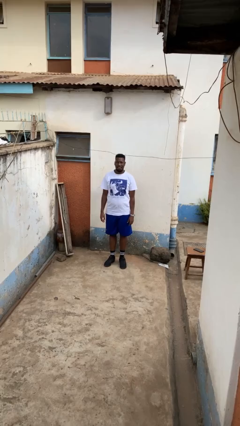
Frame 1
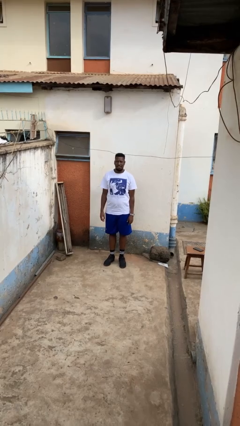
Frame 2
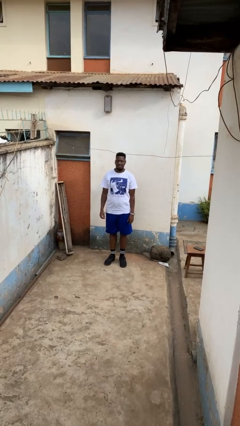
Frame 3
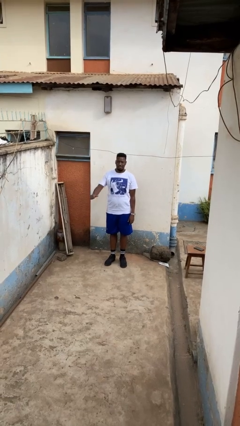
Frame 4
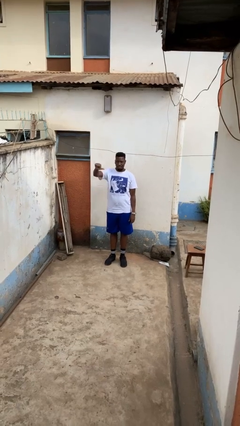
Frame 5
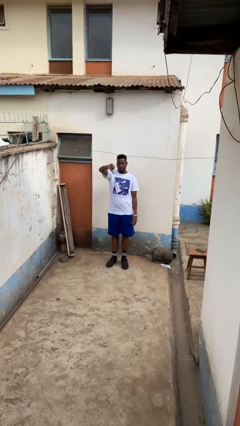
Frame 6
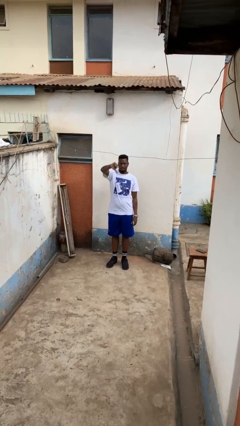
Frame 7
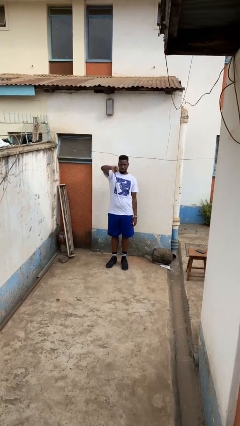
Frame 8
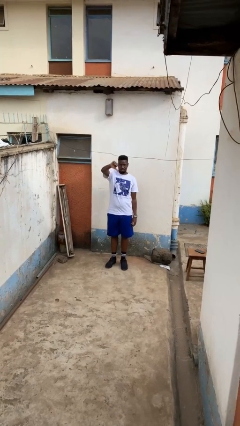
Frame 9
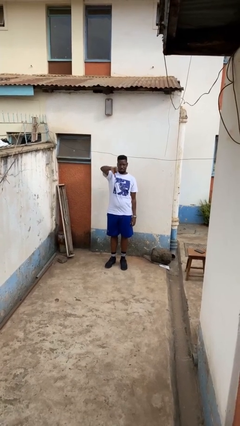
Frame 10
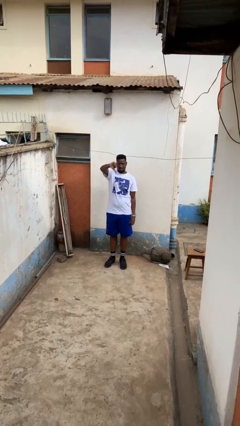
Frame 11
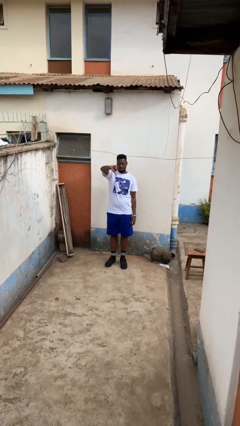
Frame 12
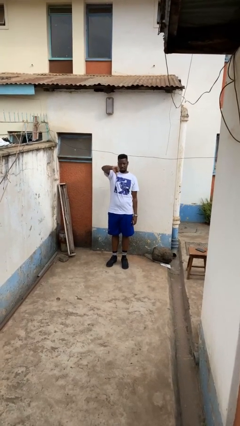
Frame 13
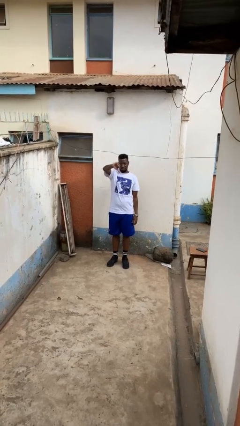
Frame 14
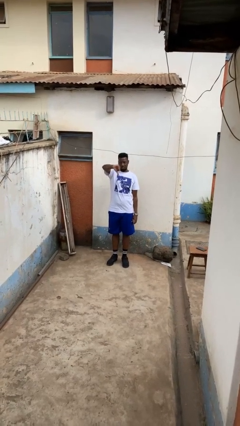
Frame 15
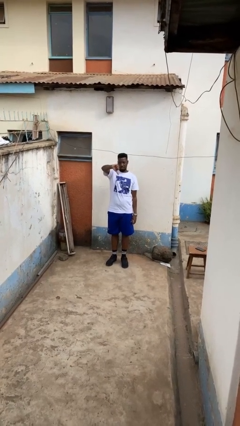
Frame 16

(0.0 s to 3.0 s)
person gestures thumbs down

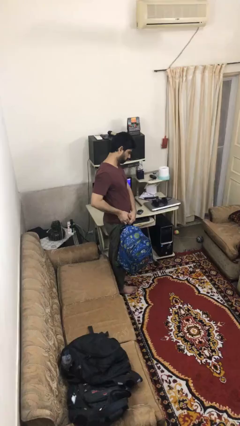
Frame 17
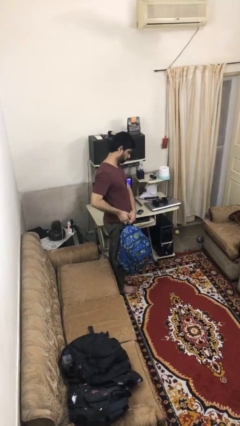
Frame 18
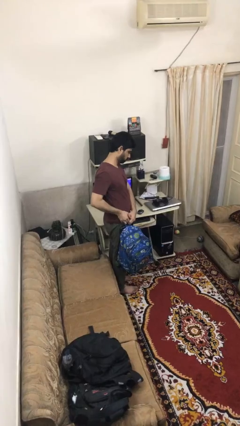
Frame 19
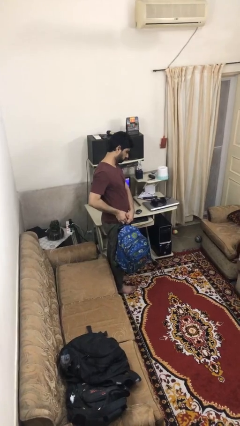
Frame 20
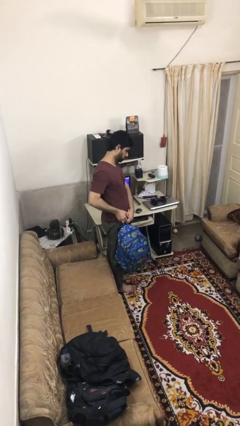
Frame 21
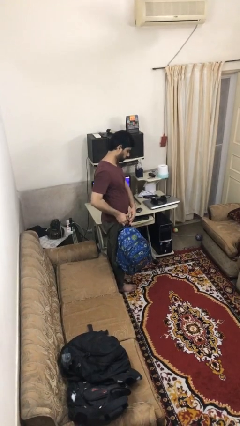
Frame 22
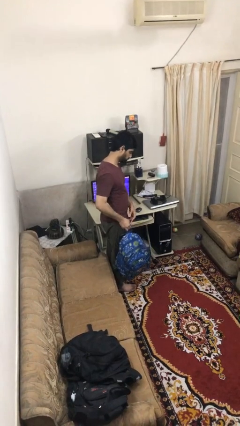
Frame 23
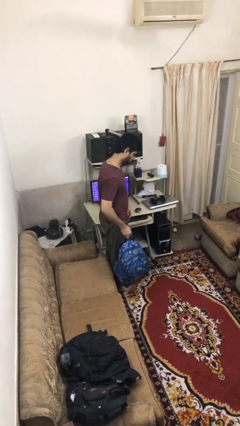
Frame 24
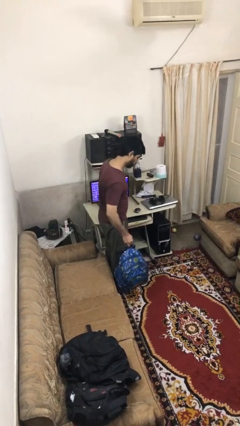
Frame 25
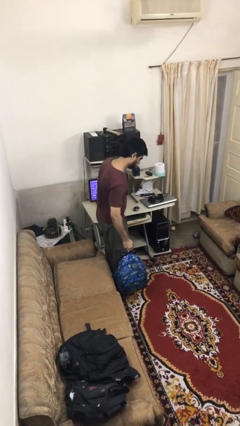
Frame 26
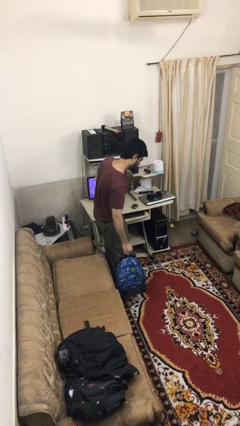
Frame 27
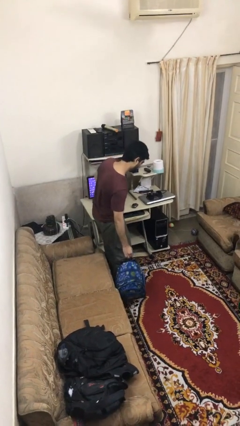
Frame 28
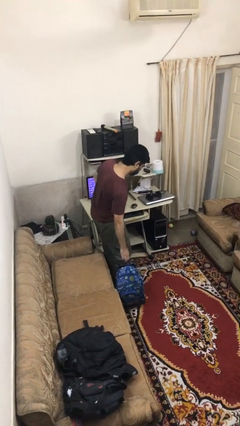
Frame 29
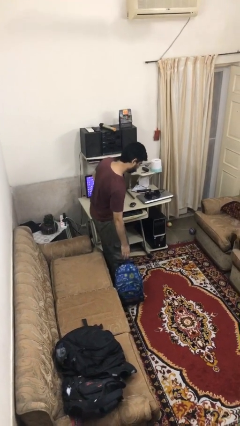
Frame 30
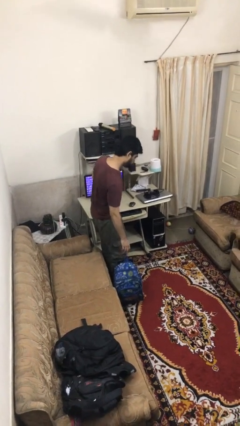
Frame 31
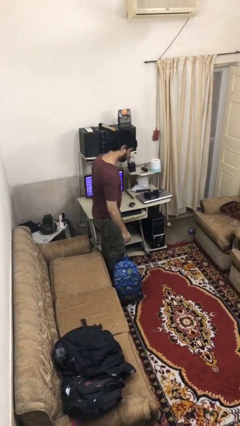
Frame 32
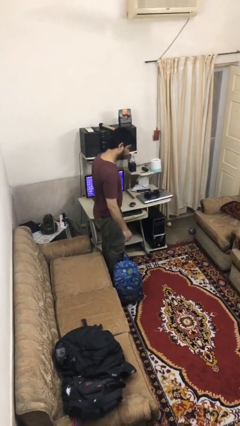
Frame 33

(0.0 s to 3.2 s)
person puts down object on floor

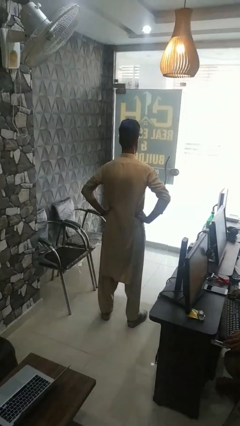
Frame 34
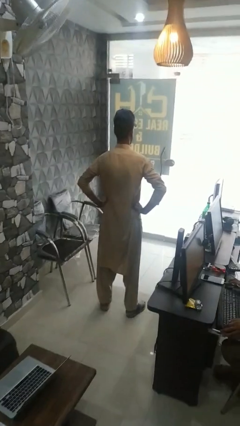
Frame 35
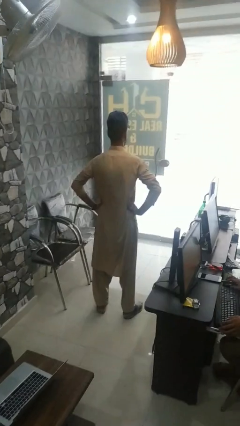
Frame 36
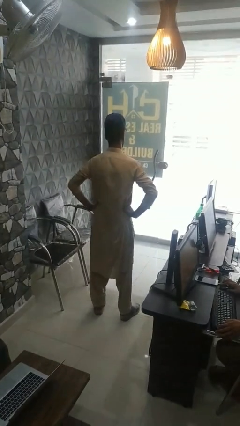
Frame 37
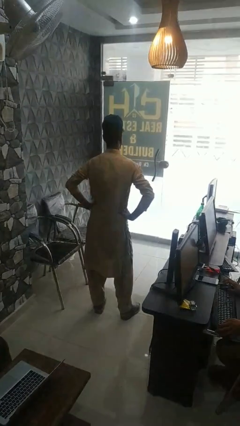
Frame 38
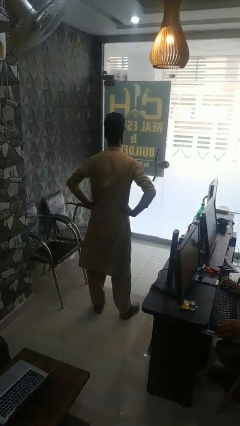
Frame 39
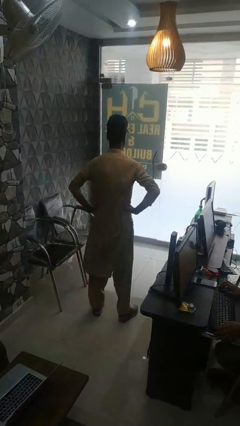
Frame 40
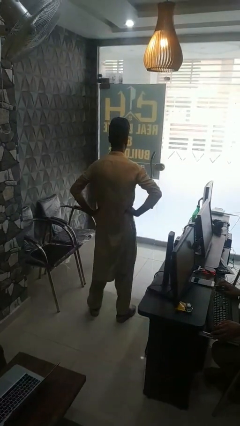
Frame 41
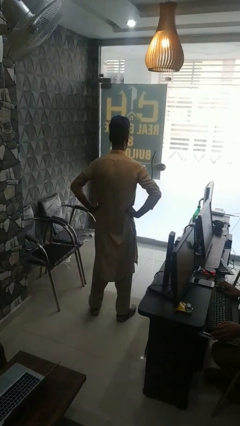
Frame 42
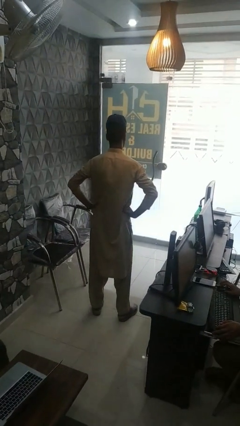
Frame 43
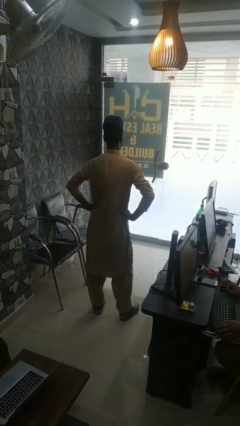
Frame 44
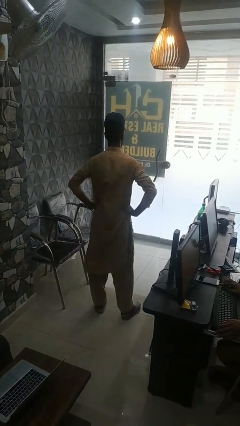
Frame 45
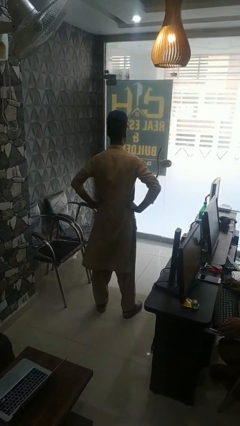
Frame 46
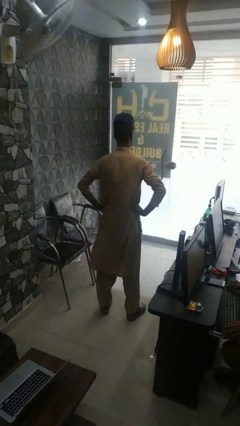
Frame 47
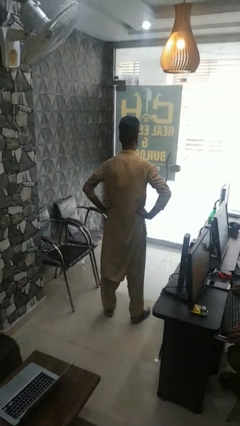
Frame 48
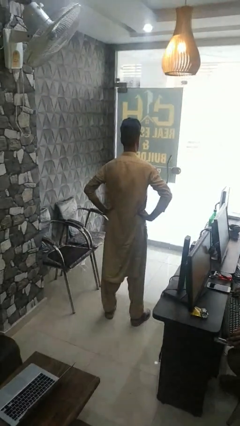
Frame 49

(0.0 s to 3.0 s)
person wiggles hips

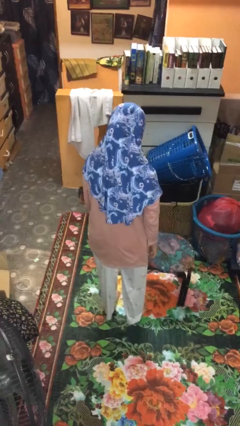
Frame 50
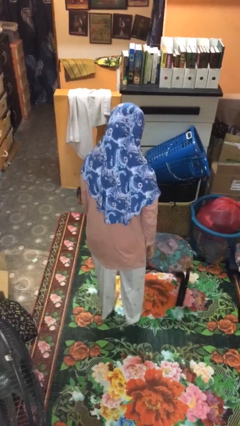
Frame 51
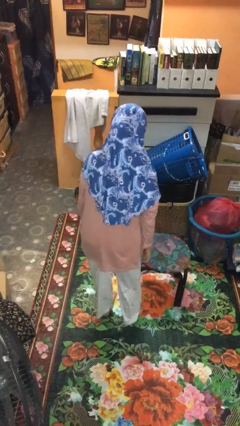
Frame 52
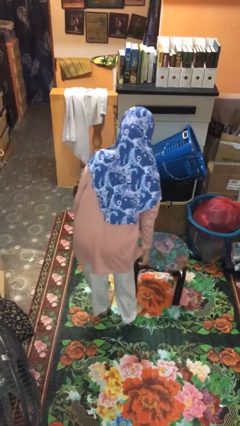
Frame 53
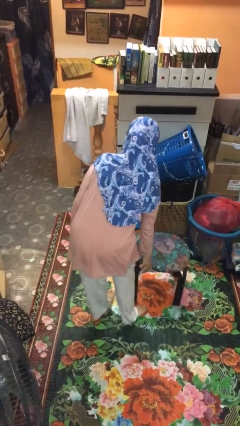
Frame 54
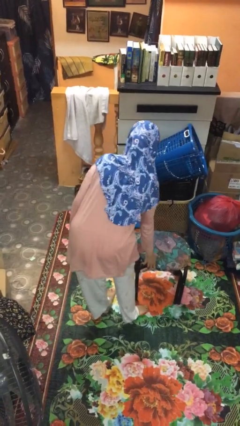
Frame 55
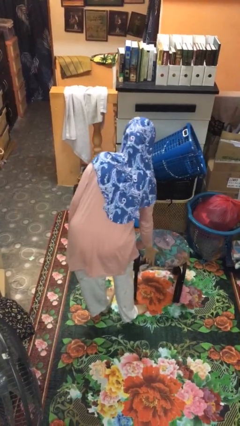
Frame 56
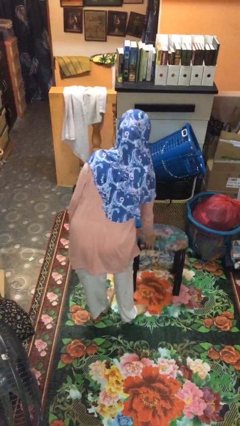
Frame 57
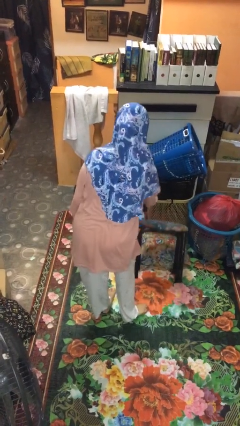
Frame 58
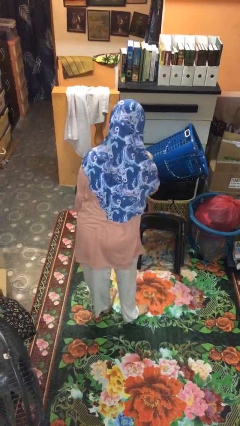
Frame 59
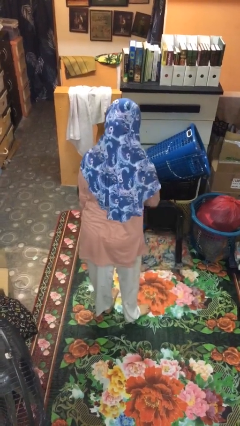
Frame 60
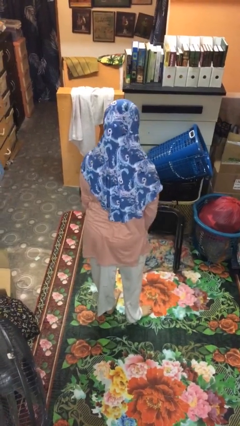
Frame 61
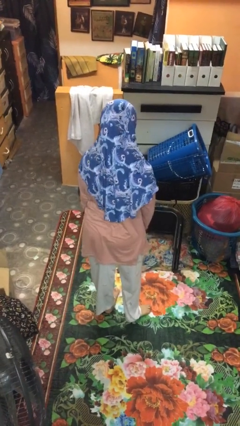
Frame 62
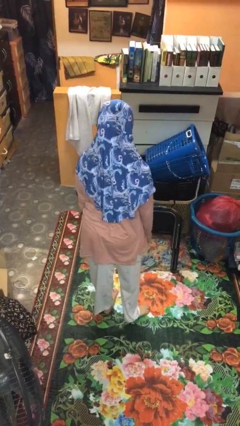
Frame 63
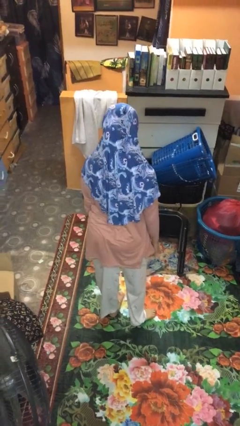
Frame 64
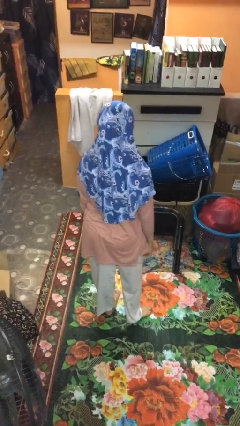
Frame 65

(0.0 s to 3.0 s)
person knocks over furniture

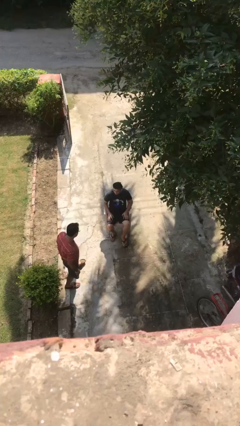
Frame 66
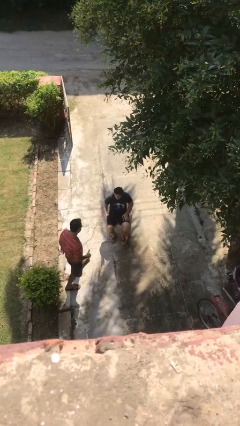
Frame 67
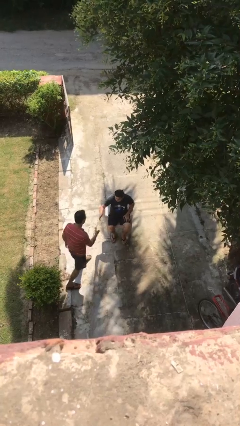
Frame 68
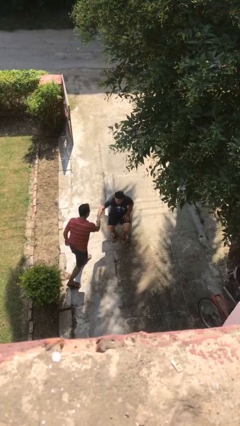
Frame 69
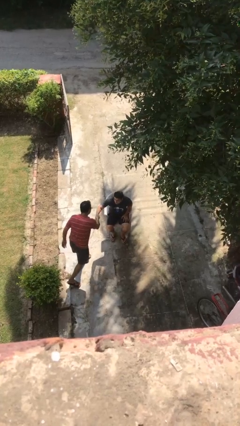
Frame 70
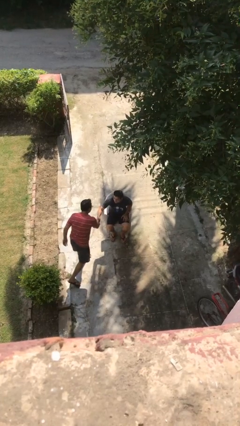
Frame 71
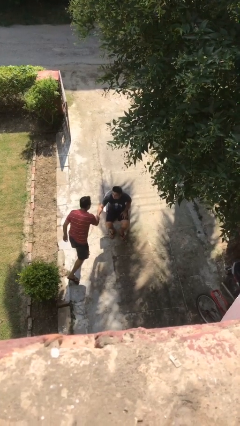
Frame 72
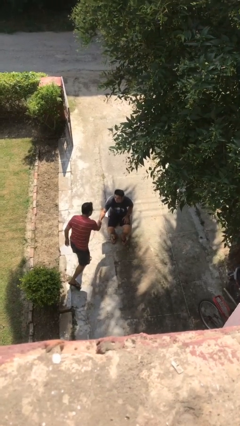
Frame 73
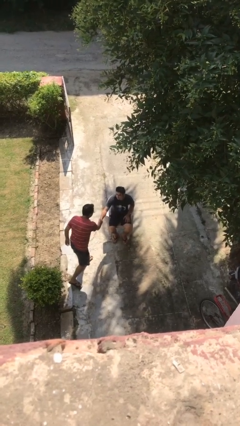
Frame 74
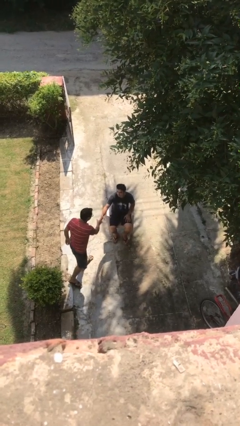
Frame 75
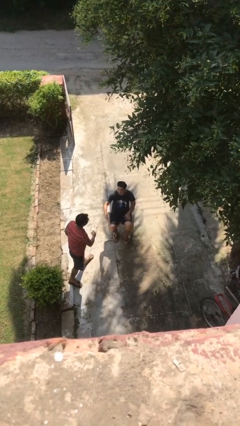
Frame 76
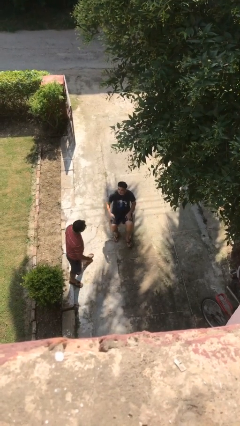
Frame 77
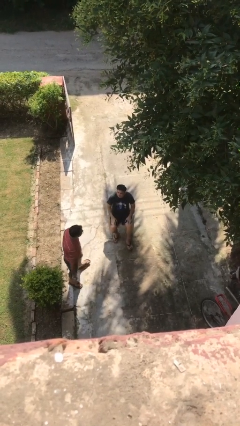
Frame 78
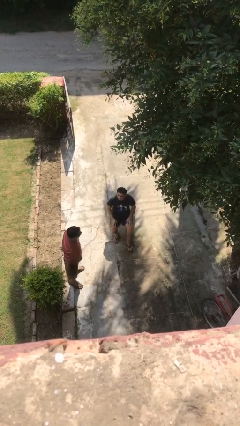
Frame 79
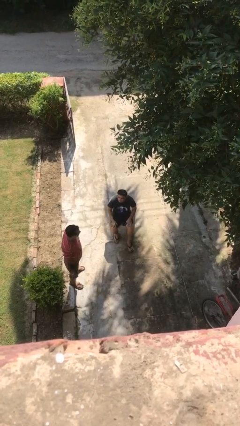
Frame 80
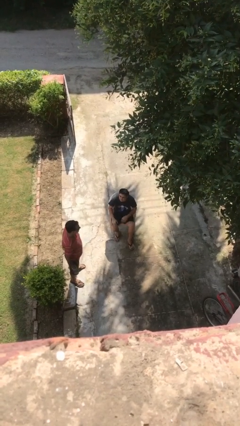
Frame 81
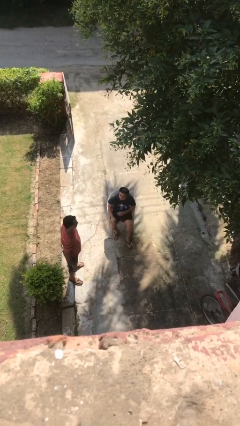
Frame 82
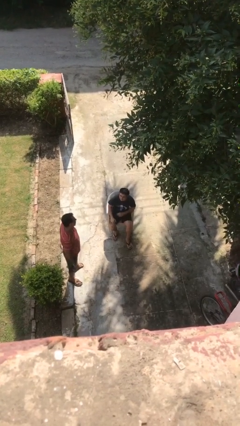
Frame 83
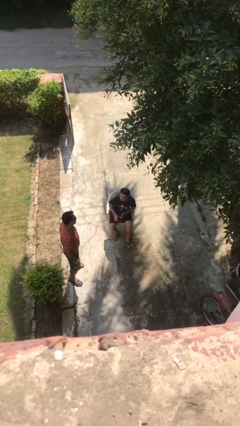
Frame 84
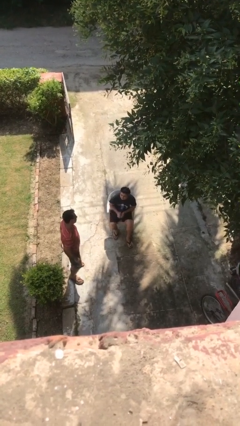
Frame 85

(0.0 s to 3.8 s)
person shakes hand

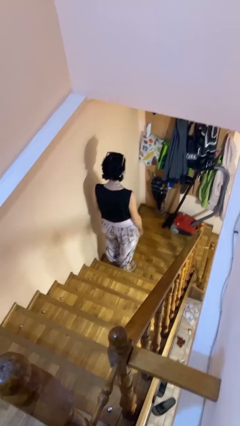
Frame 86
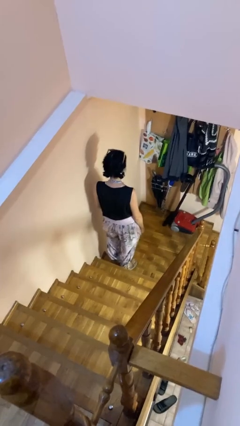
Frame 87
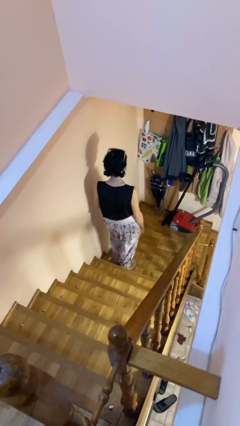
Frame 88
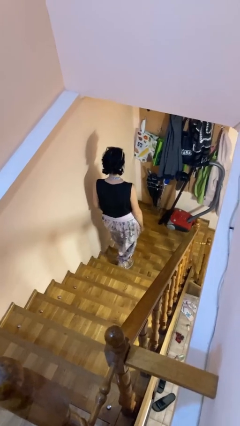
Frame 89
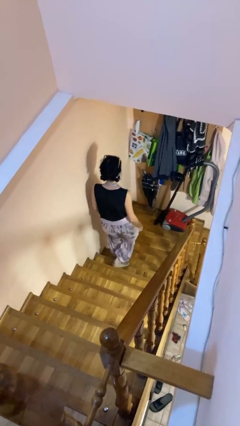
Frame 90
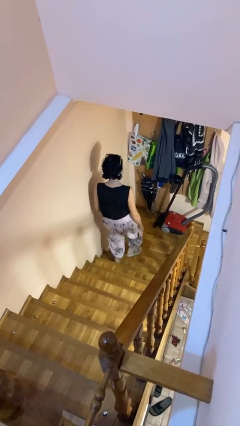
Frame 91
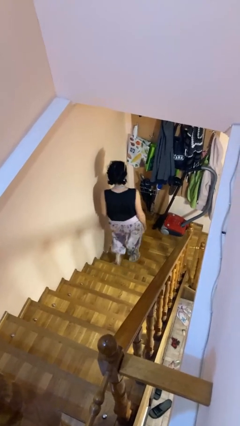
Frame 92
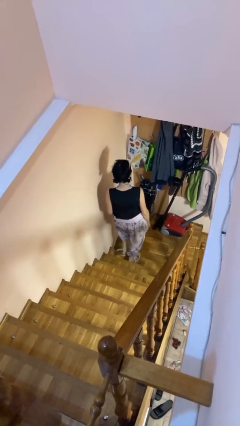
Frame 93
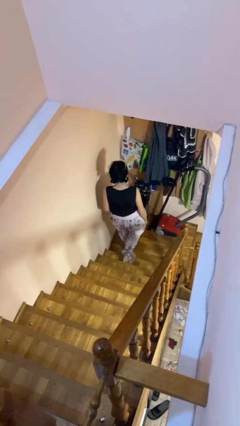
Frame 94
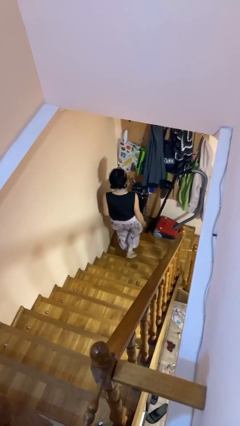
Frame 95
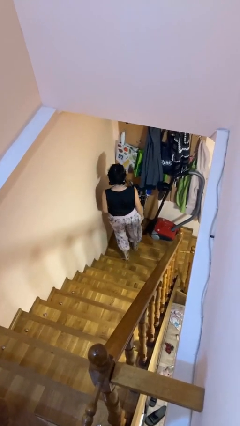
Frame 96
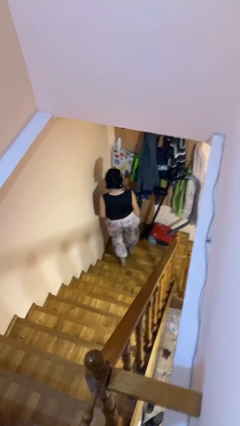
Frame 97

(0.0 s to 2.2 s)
person climbs down stairs
